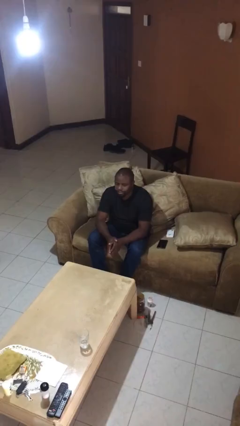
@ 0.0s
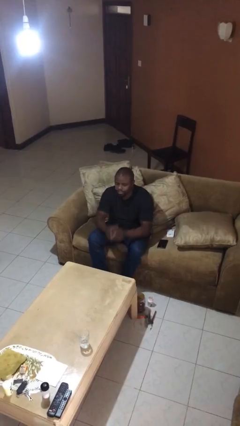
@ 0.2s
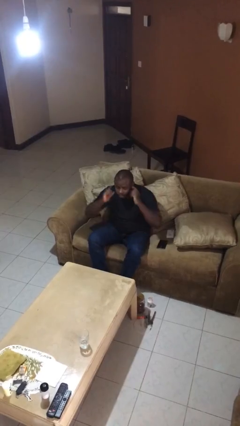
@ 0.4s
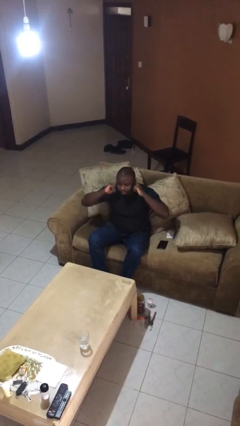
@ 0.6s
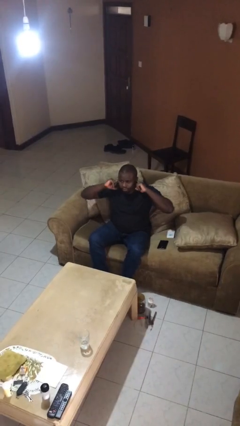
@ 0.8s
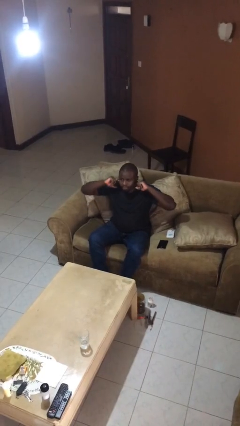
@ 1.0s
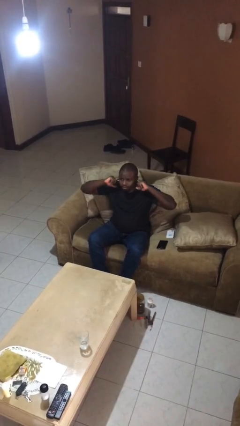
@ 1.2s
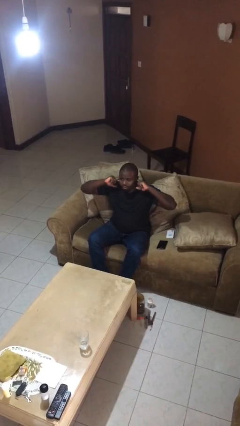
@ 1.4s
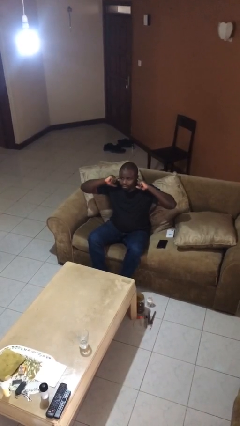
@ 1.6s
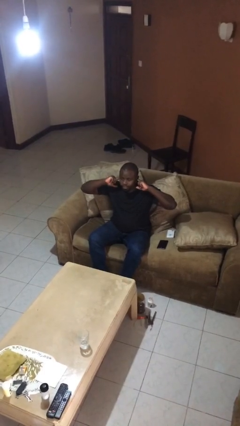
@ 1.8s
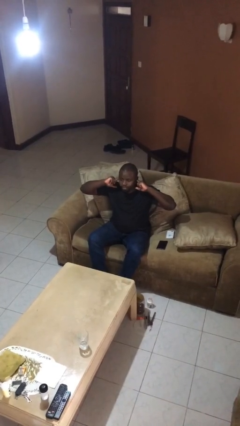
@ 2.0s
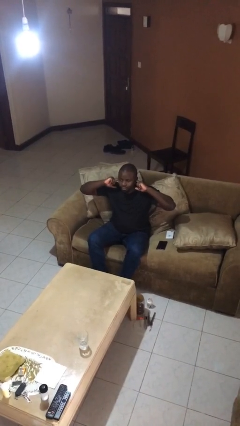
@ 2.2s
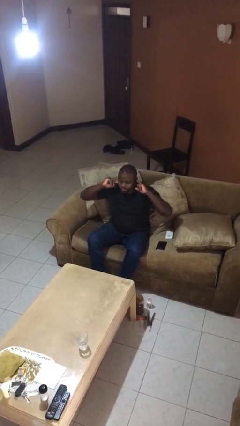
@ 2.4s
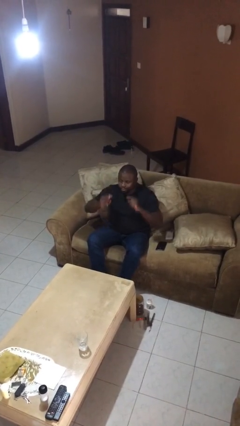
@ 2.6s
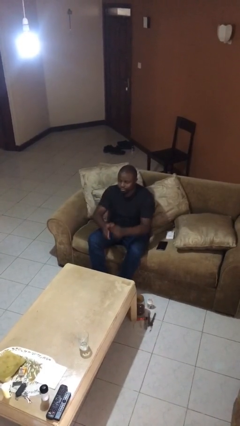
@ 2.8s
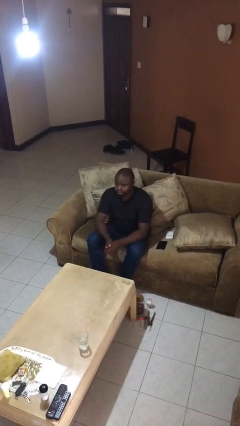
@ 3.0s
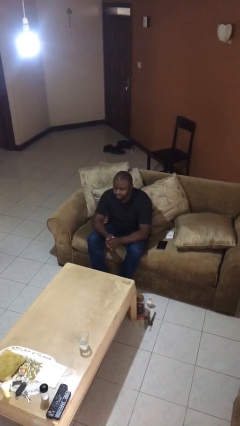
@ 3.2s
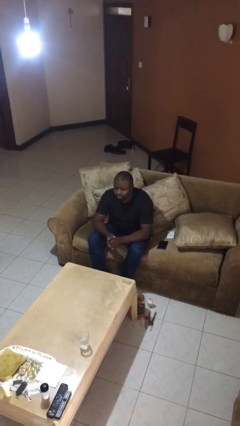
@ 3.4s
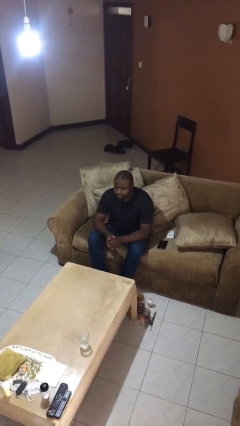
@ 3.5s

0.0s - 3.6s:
person puts fingers in ear

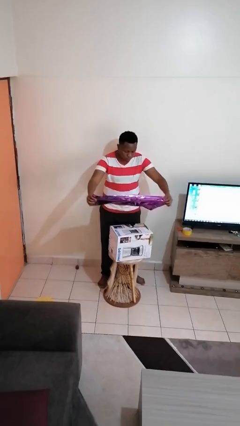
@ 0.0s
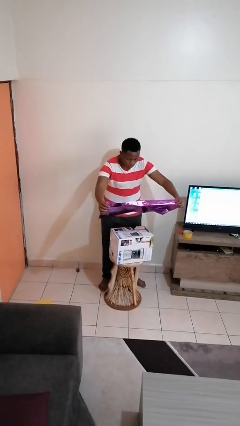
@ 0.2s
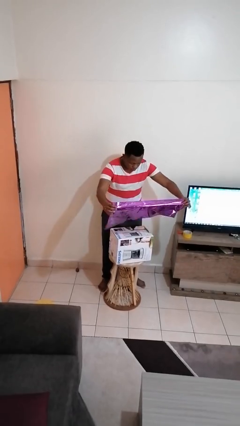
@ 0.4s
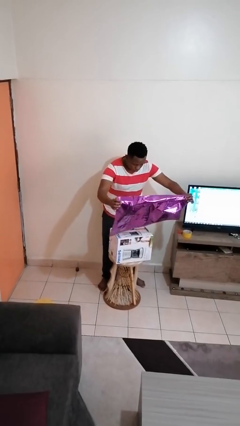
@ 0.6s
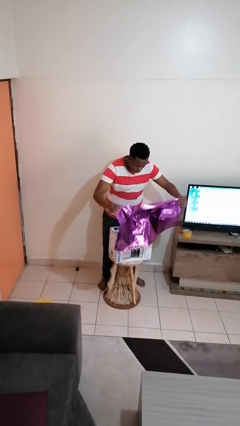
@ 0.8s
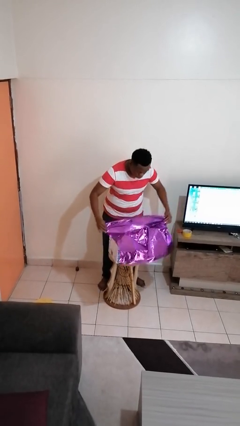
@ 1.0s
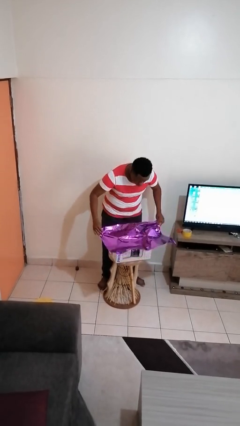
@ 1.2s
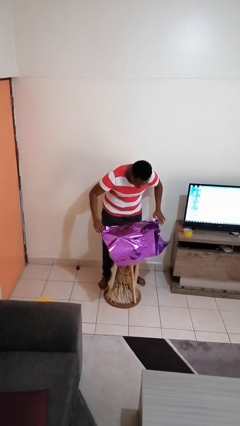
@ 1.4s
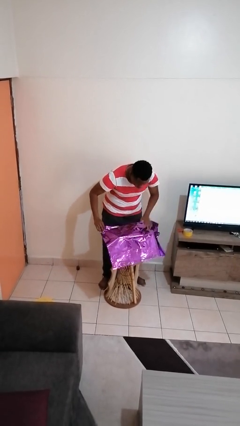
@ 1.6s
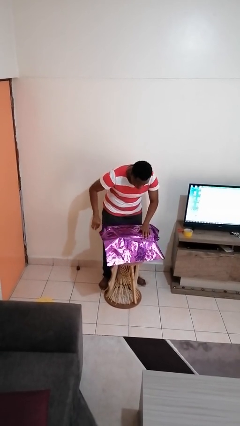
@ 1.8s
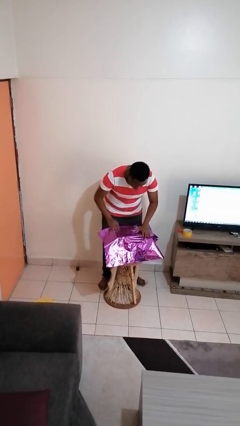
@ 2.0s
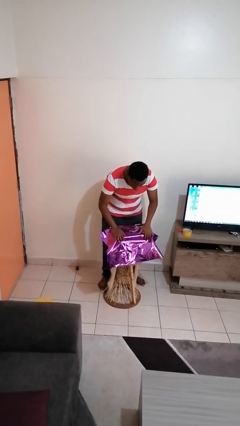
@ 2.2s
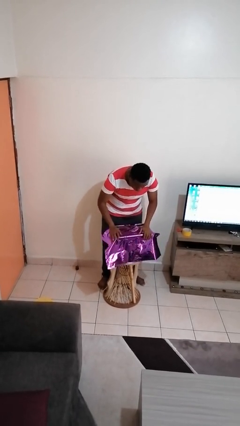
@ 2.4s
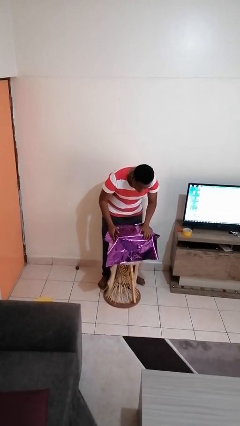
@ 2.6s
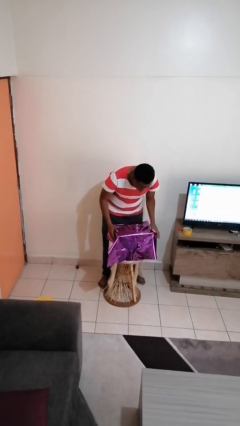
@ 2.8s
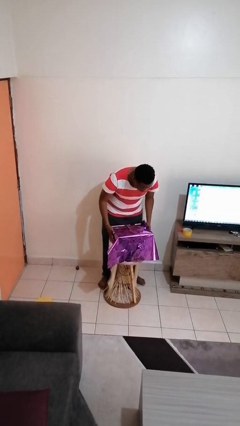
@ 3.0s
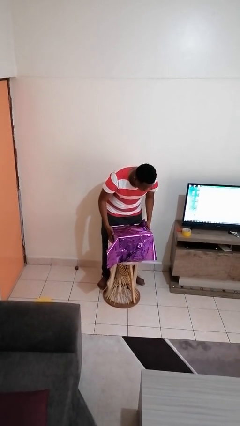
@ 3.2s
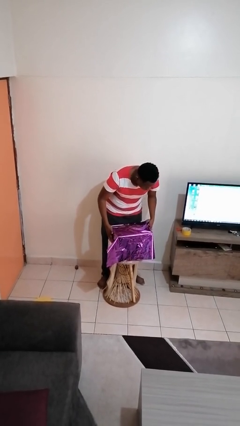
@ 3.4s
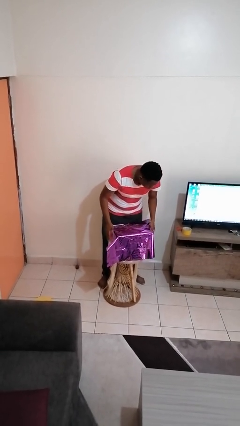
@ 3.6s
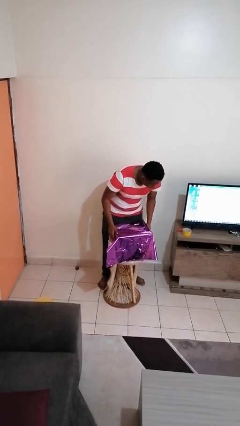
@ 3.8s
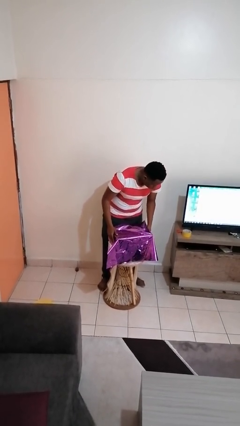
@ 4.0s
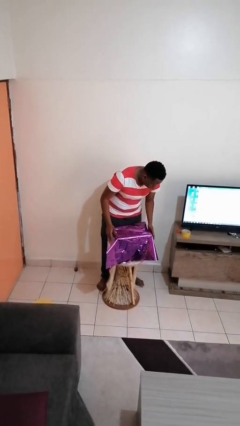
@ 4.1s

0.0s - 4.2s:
person wraps box

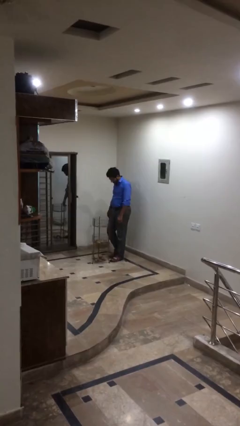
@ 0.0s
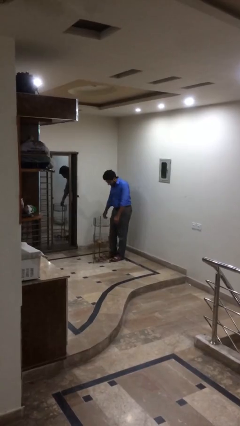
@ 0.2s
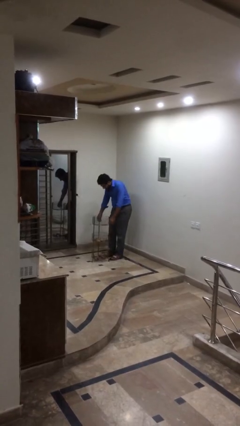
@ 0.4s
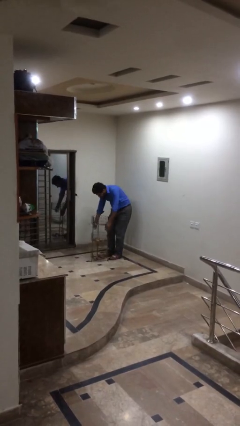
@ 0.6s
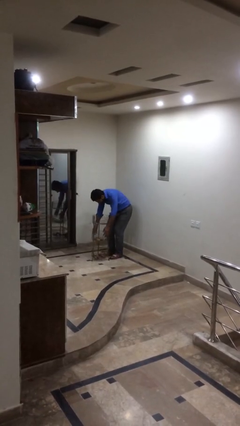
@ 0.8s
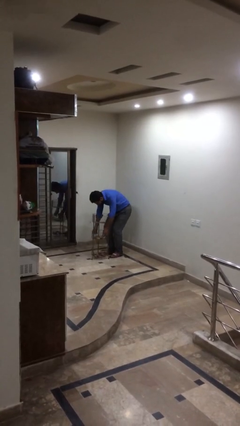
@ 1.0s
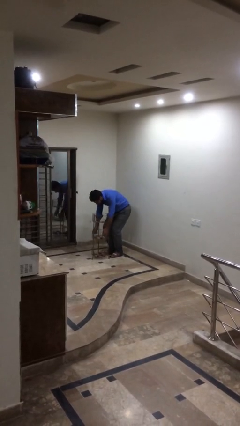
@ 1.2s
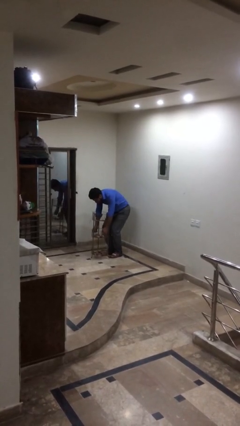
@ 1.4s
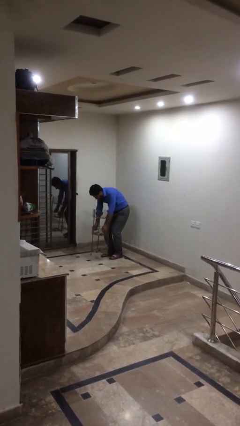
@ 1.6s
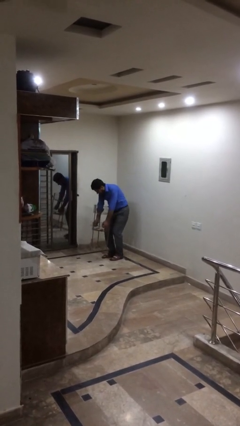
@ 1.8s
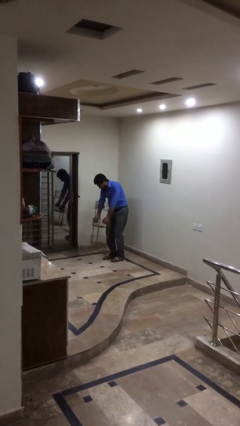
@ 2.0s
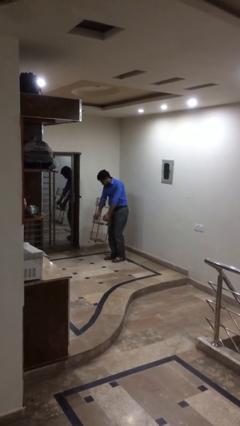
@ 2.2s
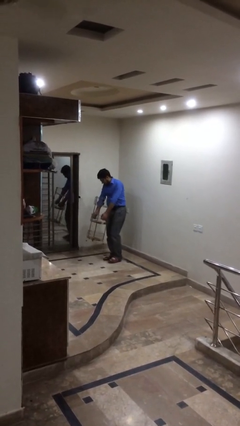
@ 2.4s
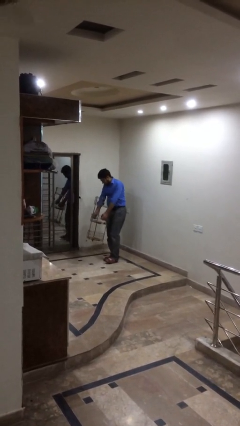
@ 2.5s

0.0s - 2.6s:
person picks up object from floor

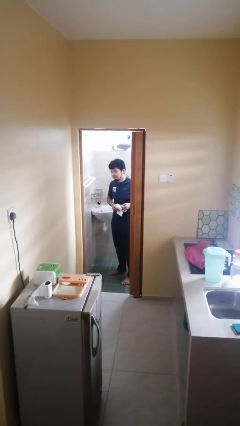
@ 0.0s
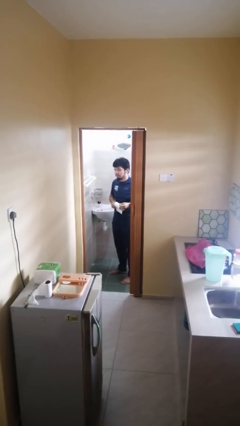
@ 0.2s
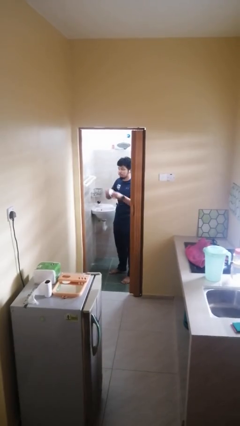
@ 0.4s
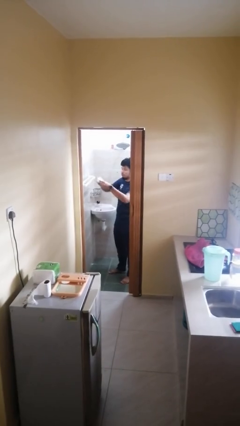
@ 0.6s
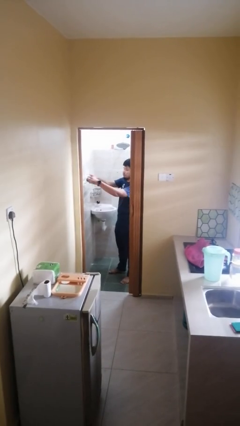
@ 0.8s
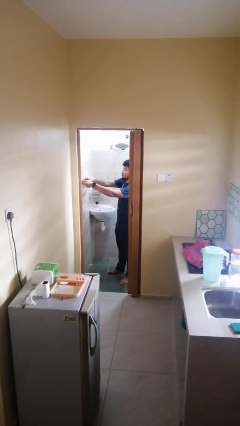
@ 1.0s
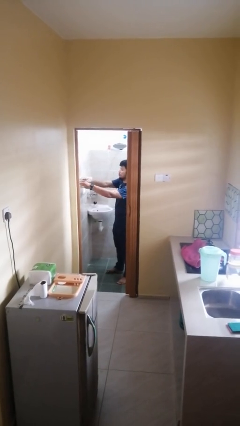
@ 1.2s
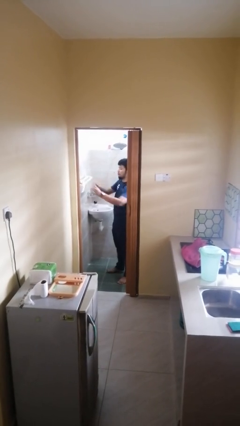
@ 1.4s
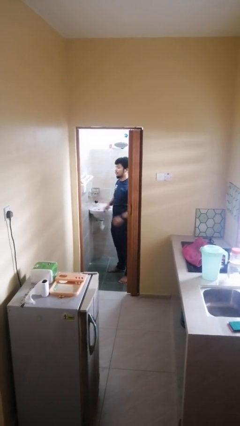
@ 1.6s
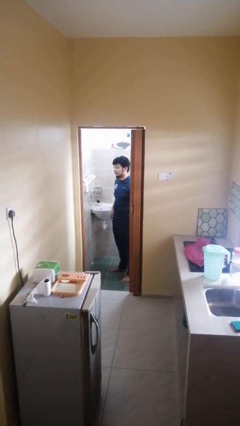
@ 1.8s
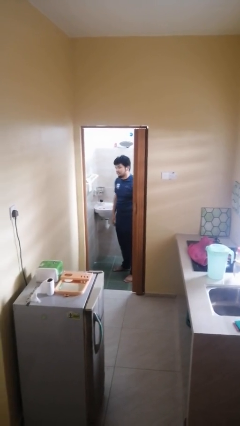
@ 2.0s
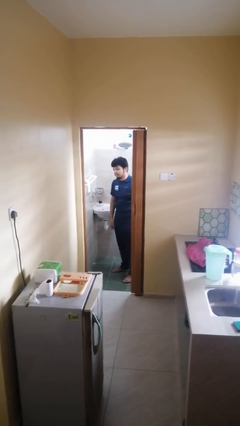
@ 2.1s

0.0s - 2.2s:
person puts down object on countertop

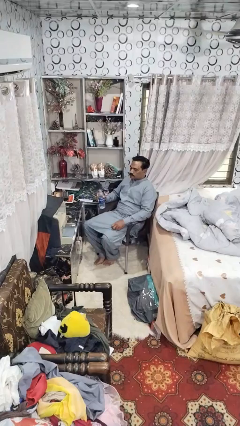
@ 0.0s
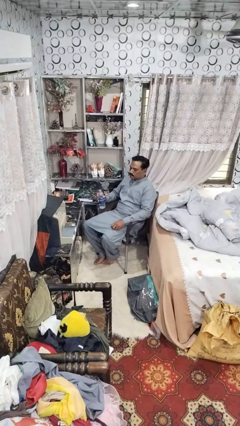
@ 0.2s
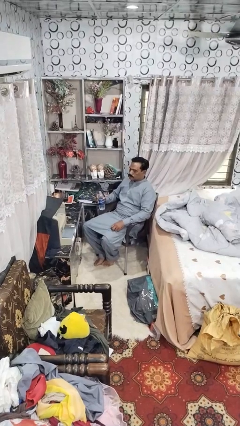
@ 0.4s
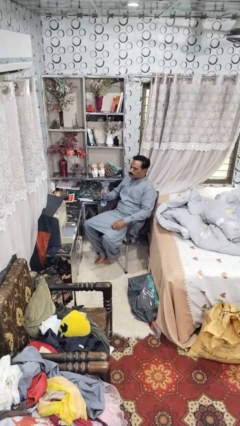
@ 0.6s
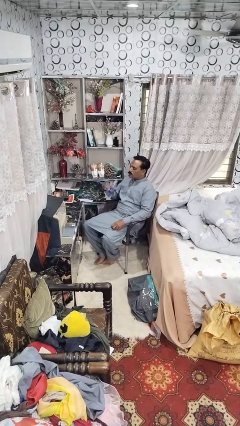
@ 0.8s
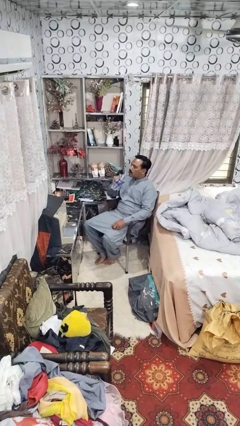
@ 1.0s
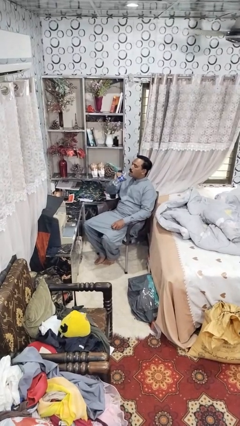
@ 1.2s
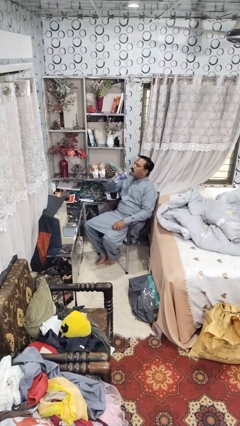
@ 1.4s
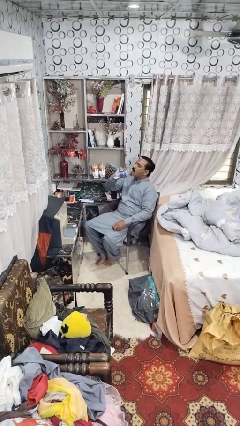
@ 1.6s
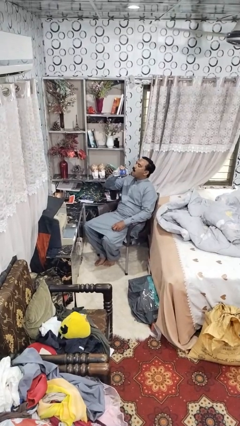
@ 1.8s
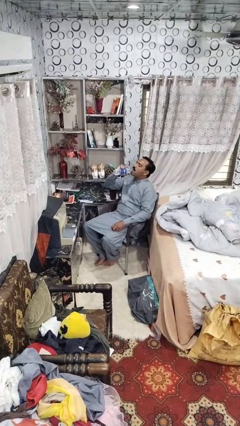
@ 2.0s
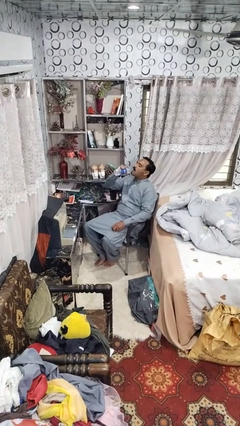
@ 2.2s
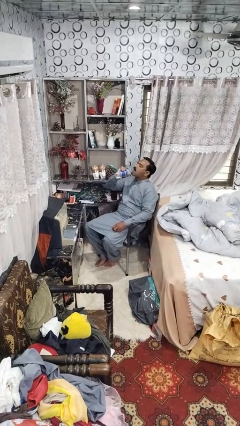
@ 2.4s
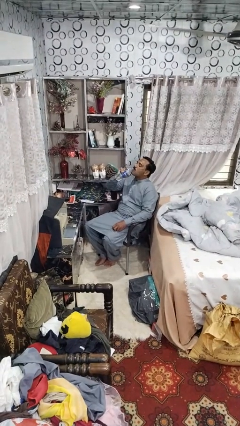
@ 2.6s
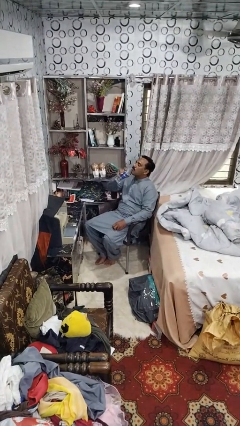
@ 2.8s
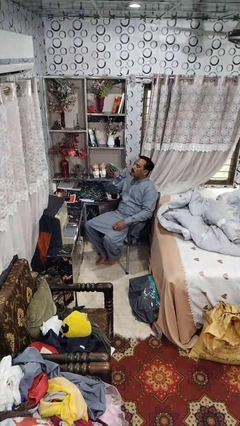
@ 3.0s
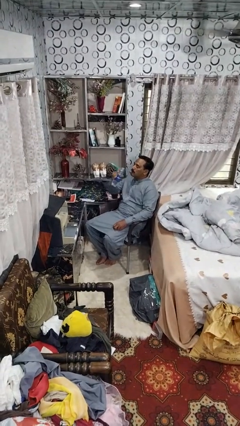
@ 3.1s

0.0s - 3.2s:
person drinks from bottle

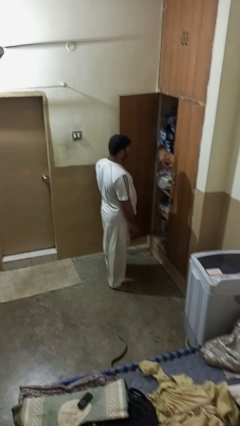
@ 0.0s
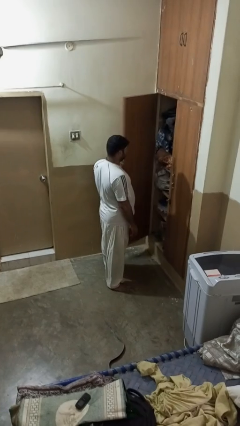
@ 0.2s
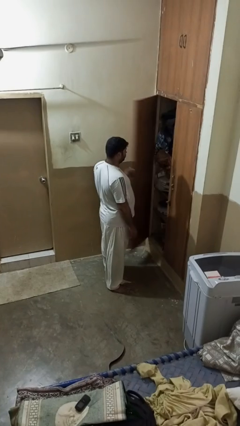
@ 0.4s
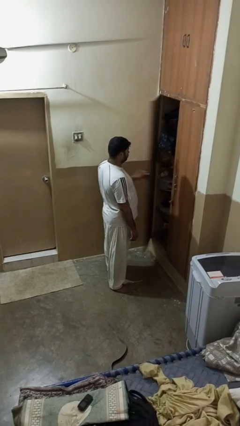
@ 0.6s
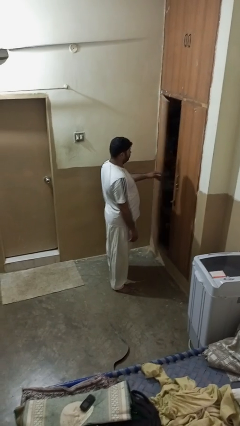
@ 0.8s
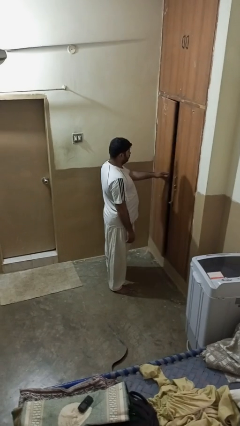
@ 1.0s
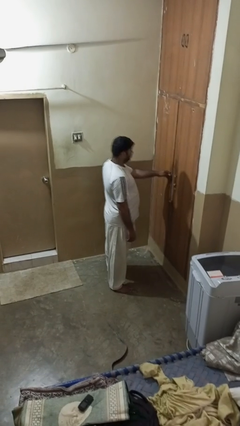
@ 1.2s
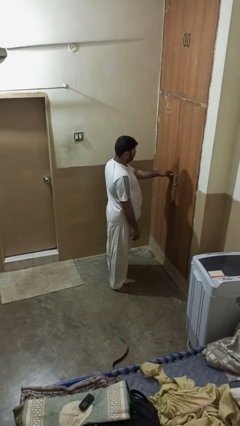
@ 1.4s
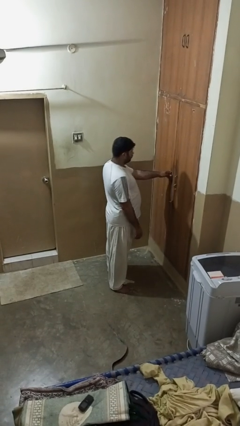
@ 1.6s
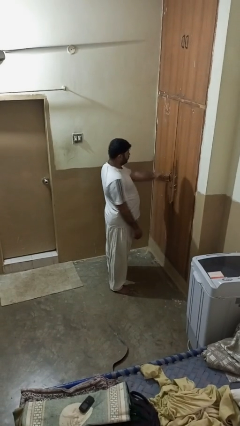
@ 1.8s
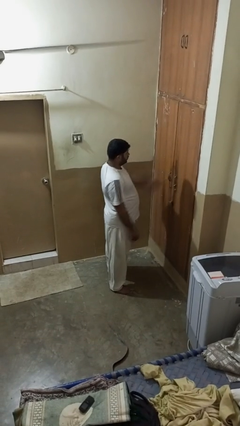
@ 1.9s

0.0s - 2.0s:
person closes closet door
